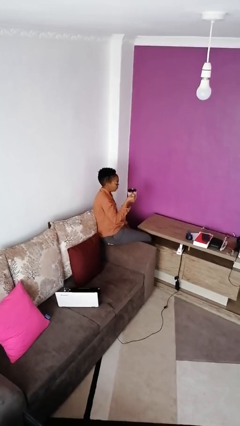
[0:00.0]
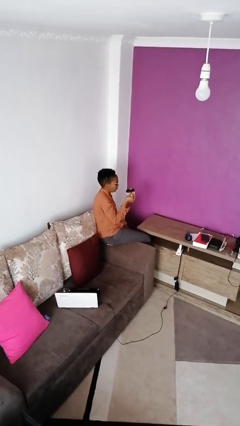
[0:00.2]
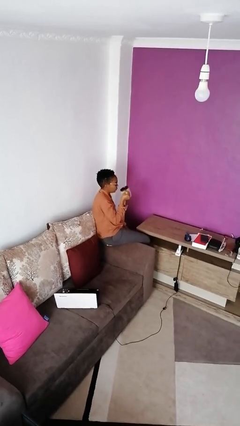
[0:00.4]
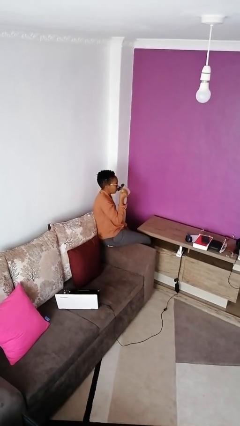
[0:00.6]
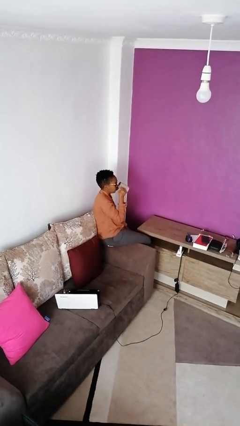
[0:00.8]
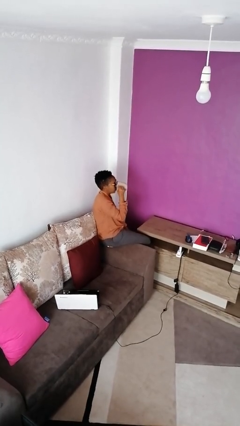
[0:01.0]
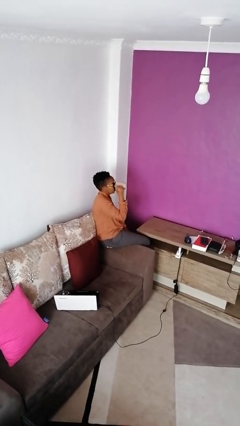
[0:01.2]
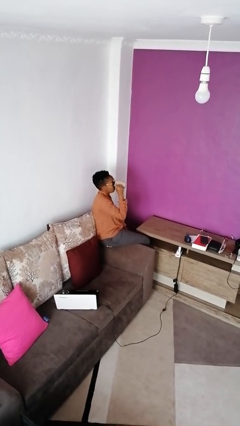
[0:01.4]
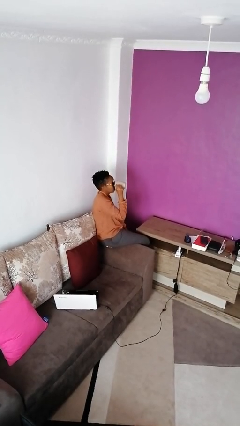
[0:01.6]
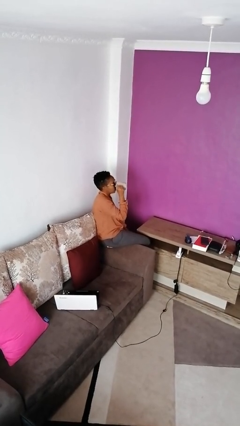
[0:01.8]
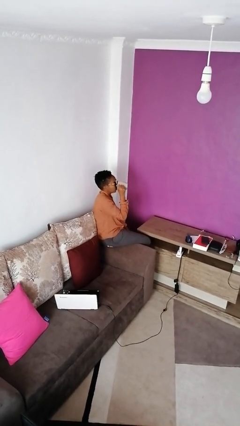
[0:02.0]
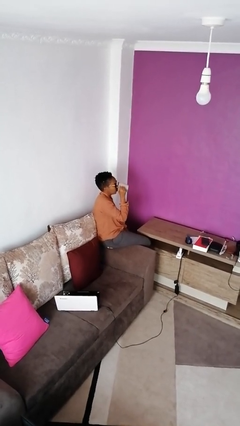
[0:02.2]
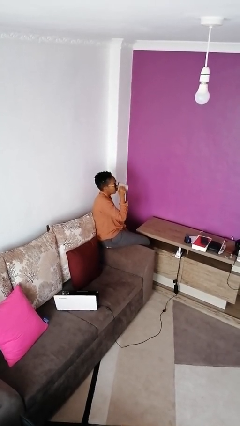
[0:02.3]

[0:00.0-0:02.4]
person drinks from mug

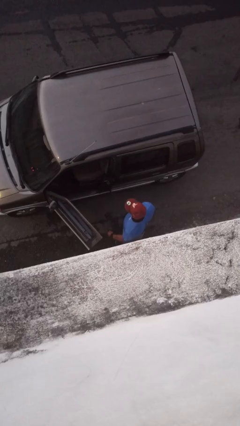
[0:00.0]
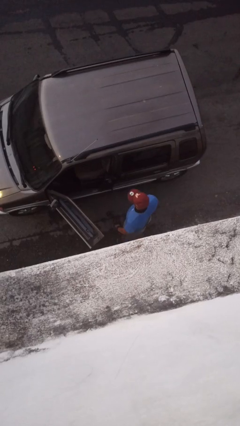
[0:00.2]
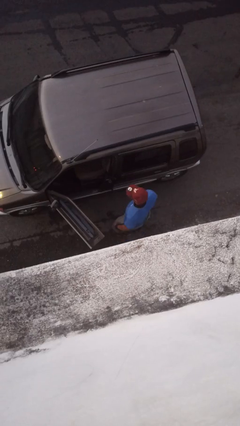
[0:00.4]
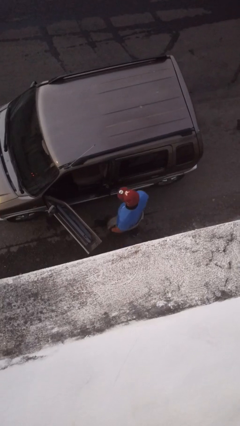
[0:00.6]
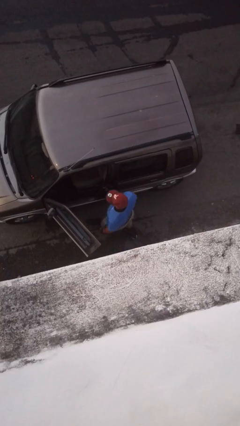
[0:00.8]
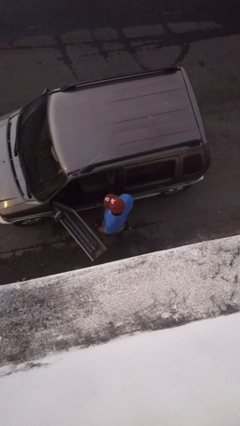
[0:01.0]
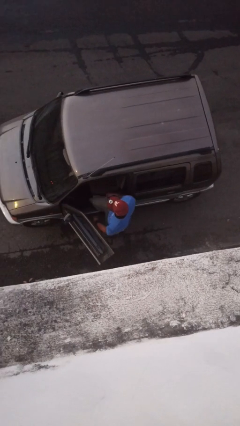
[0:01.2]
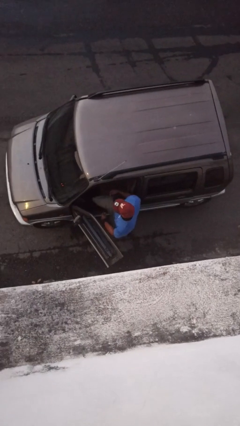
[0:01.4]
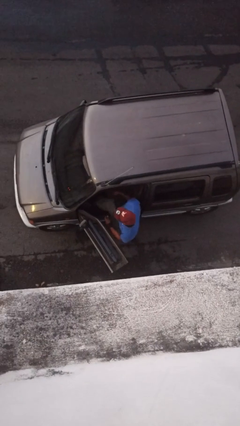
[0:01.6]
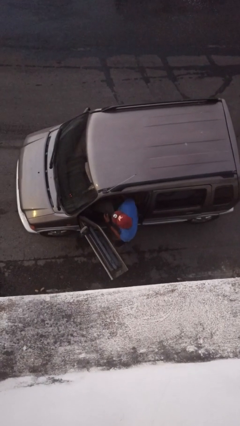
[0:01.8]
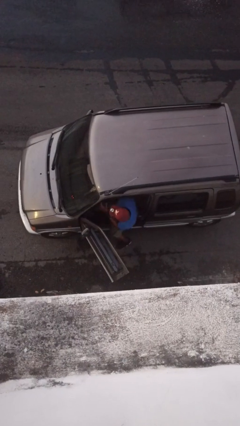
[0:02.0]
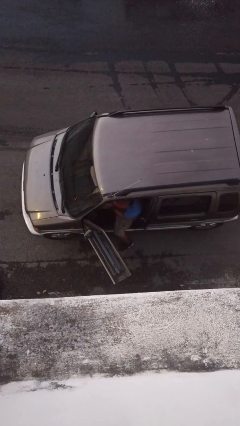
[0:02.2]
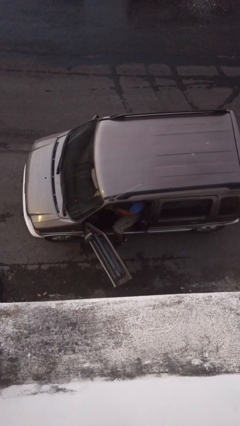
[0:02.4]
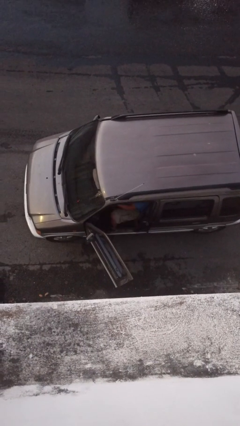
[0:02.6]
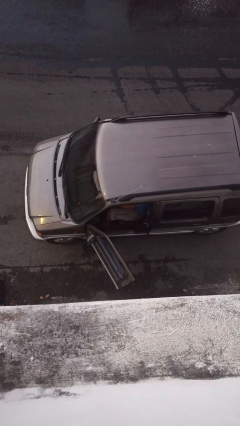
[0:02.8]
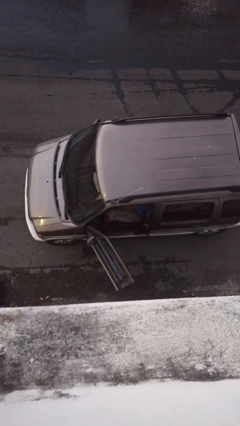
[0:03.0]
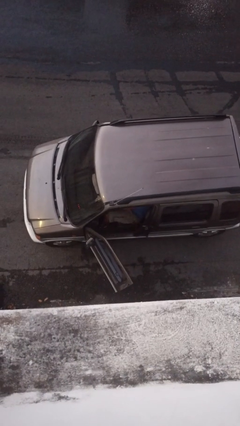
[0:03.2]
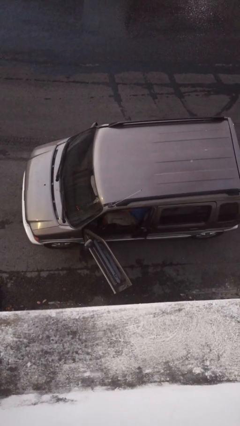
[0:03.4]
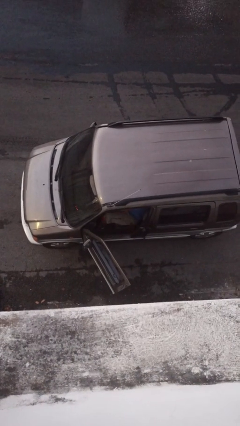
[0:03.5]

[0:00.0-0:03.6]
person enters car

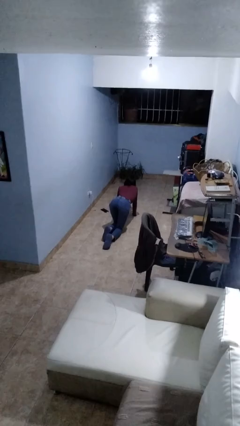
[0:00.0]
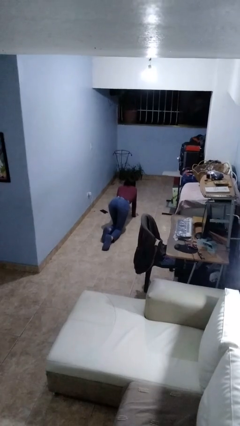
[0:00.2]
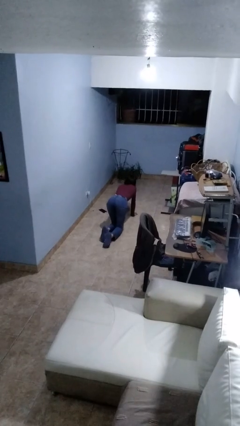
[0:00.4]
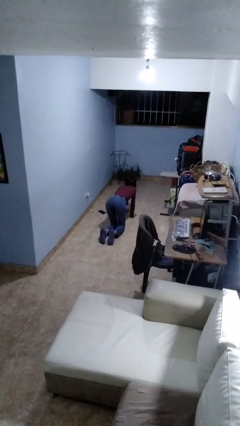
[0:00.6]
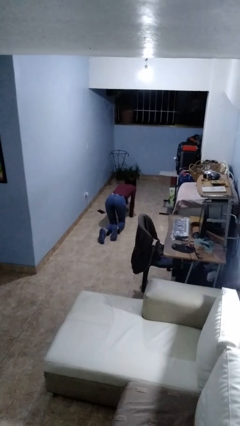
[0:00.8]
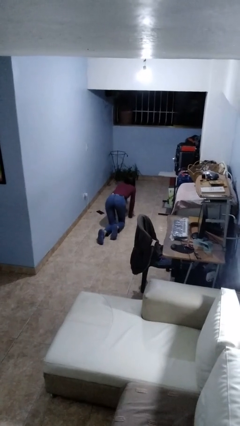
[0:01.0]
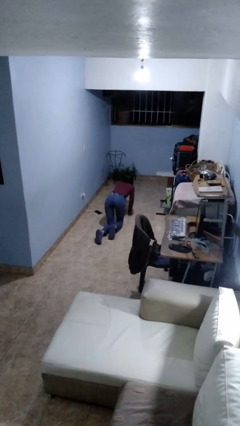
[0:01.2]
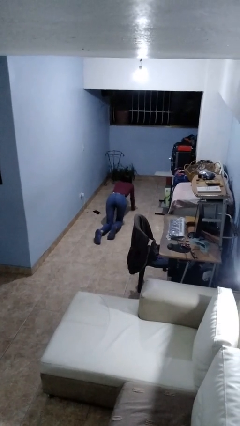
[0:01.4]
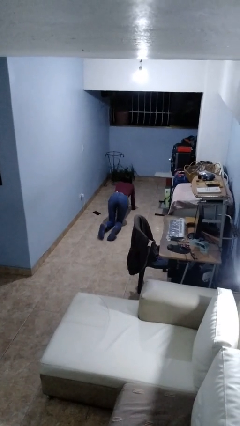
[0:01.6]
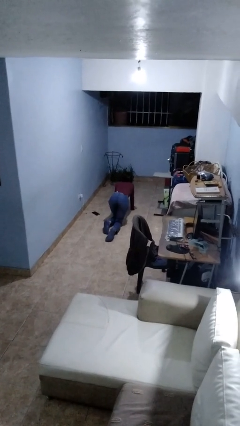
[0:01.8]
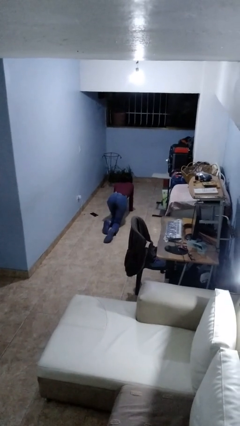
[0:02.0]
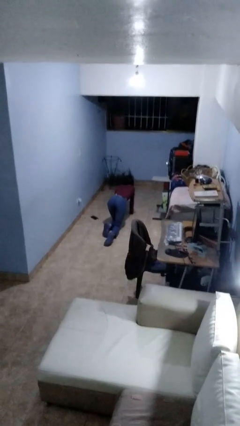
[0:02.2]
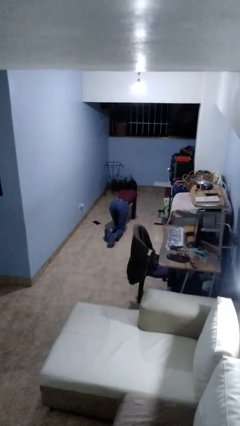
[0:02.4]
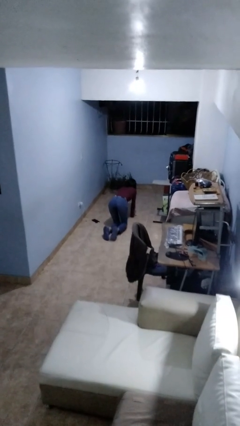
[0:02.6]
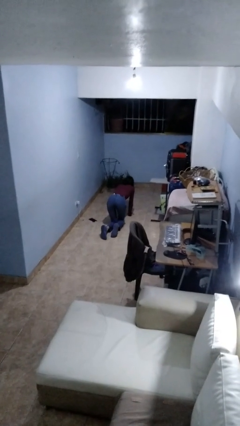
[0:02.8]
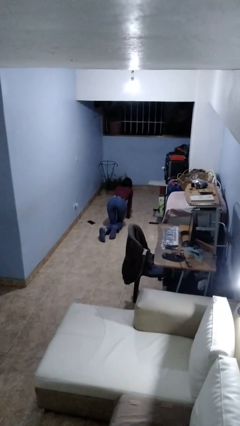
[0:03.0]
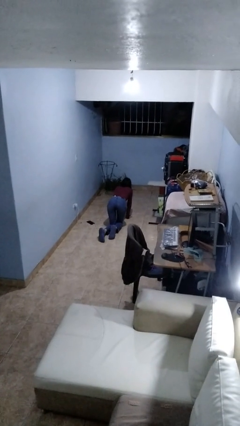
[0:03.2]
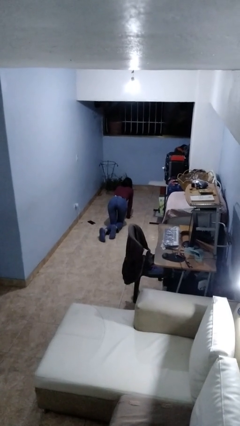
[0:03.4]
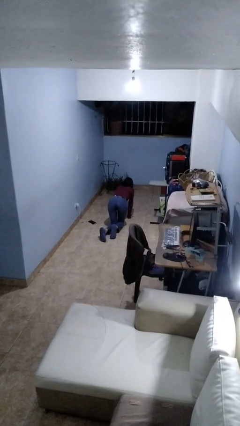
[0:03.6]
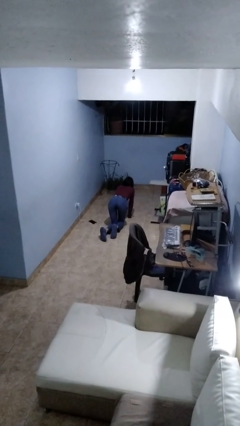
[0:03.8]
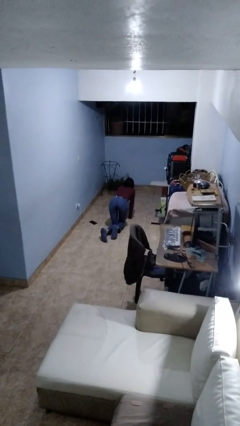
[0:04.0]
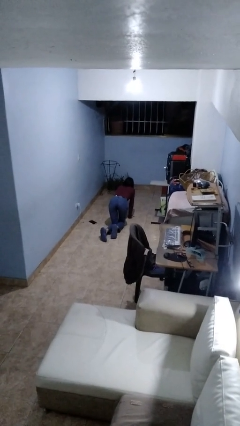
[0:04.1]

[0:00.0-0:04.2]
person crawls

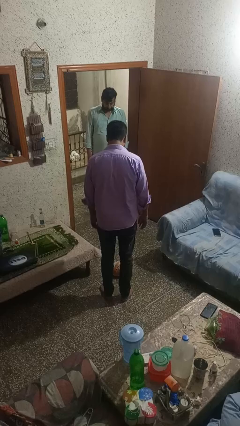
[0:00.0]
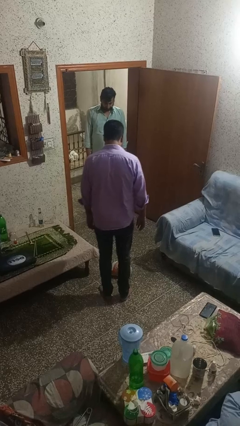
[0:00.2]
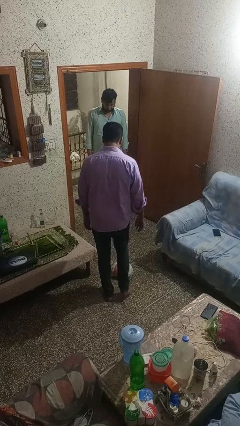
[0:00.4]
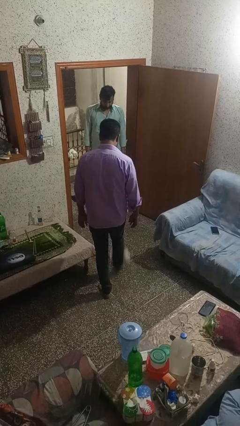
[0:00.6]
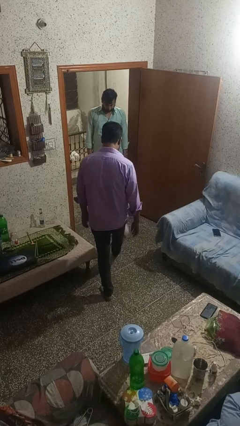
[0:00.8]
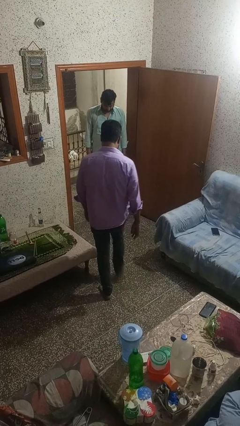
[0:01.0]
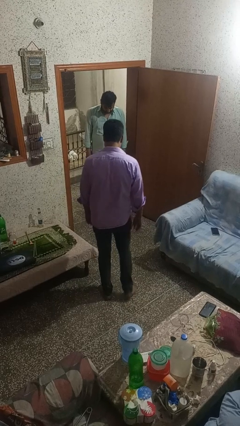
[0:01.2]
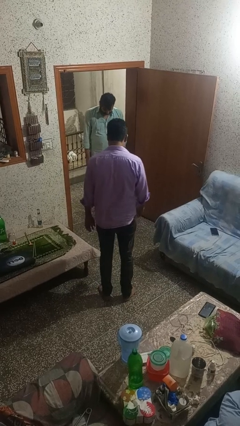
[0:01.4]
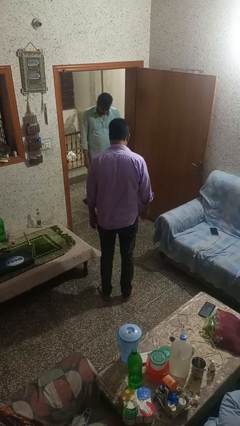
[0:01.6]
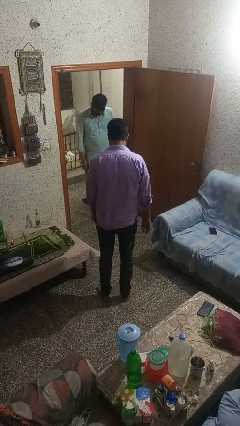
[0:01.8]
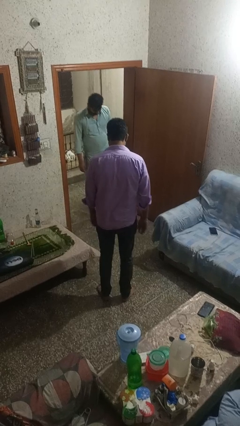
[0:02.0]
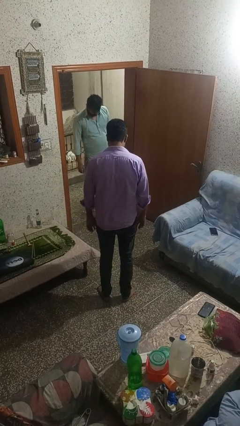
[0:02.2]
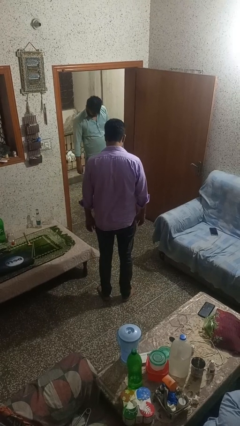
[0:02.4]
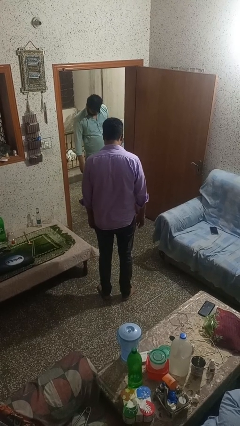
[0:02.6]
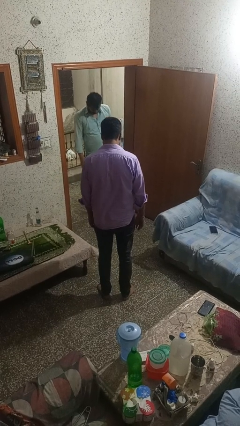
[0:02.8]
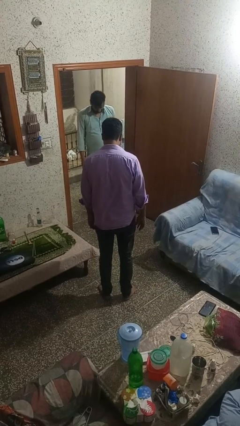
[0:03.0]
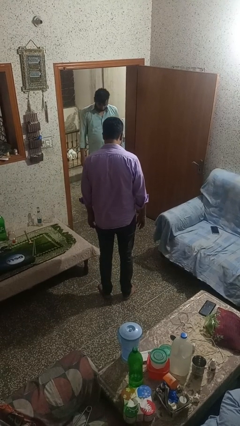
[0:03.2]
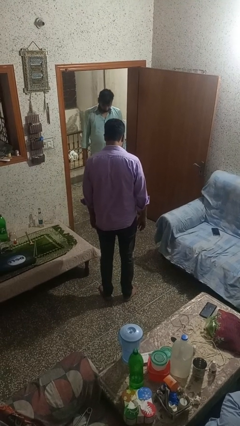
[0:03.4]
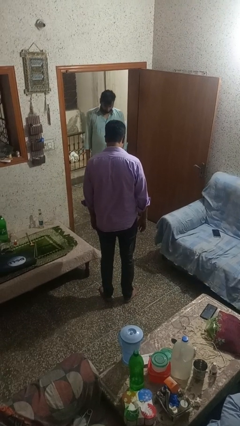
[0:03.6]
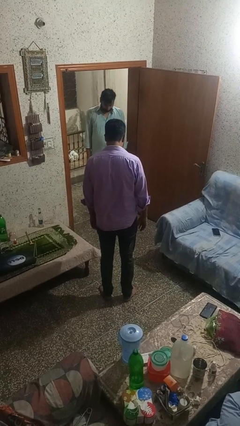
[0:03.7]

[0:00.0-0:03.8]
person kicks object to person

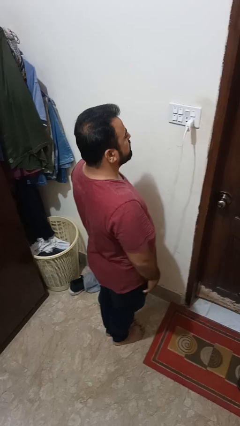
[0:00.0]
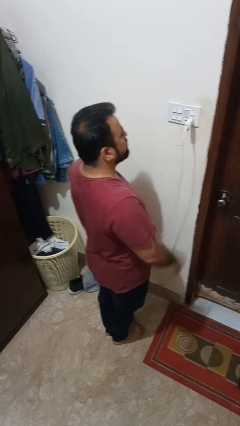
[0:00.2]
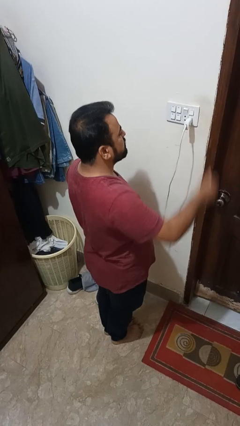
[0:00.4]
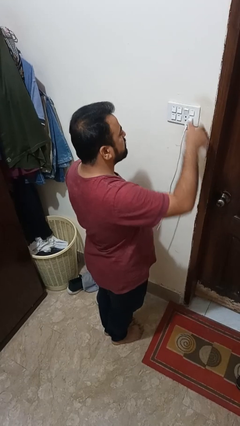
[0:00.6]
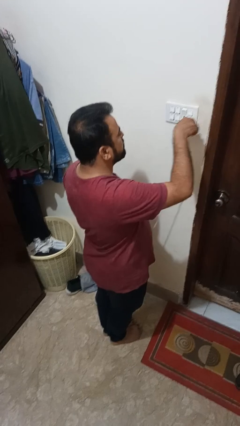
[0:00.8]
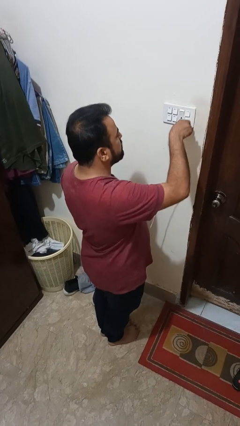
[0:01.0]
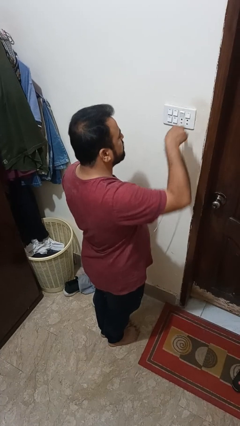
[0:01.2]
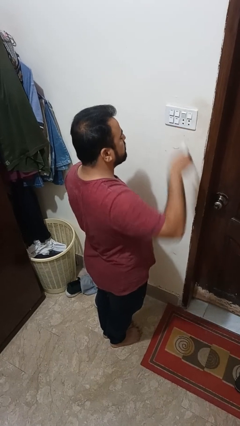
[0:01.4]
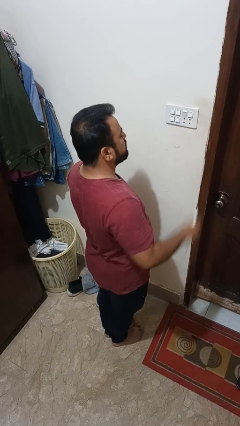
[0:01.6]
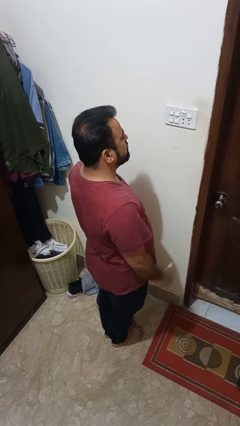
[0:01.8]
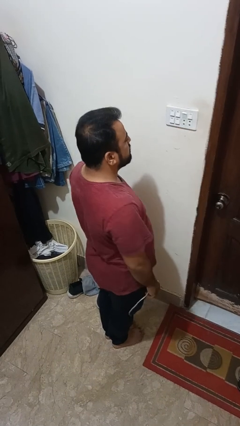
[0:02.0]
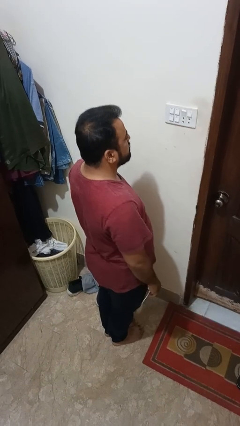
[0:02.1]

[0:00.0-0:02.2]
person unplugs from electrical socket

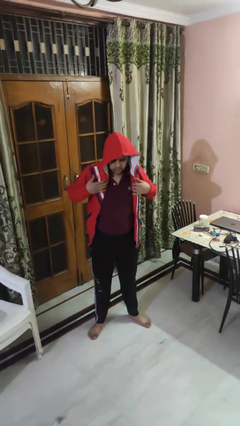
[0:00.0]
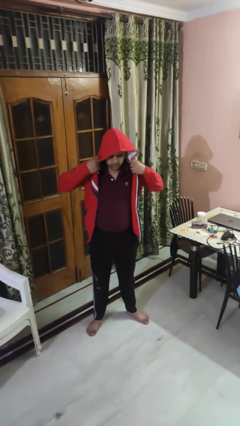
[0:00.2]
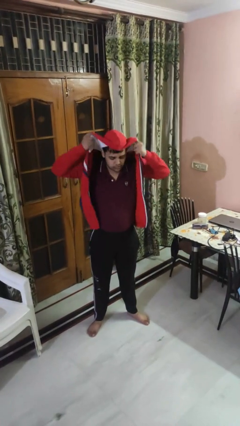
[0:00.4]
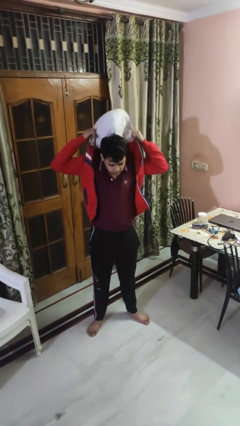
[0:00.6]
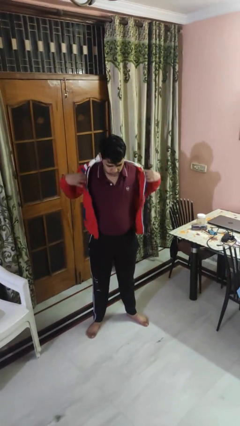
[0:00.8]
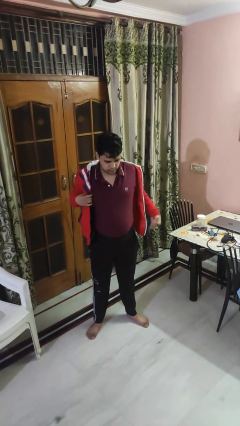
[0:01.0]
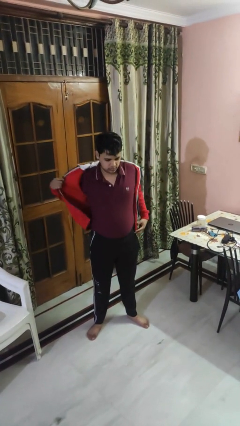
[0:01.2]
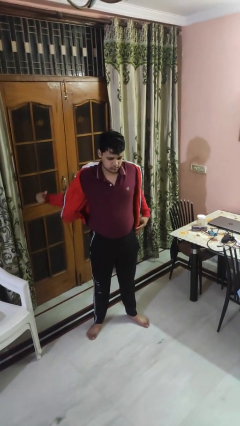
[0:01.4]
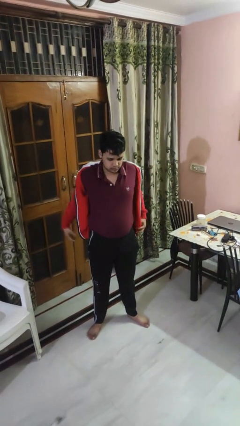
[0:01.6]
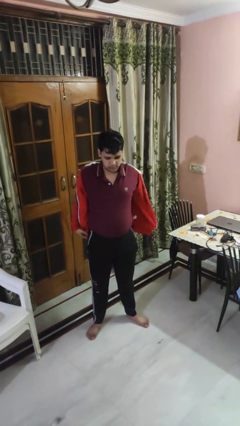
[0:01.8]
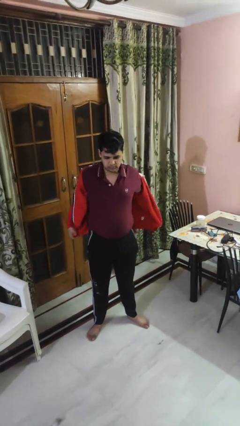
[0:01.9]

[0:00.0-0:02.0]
person takes off hoodie
